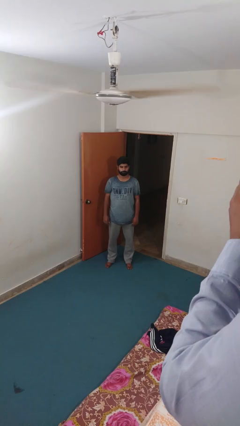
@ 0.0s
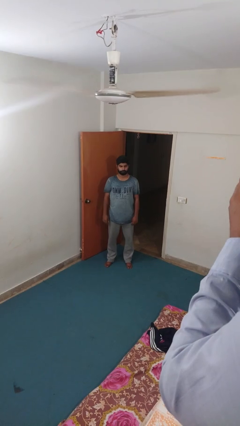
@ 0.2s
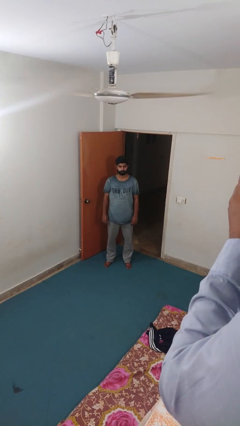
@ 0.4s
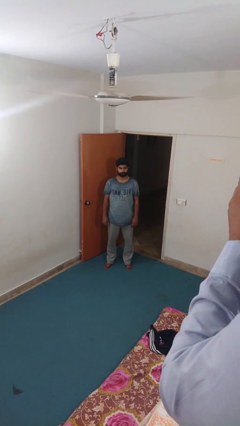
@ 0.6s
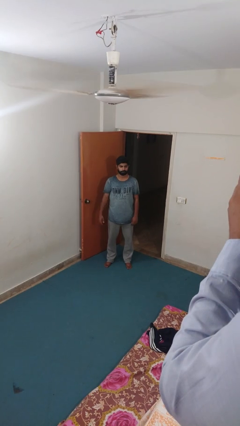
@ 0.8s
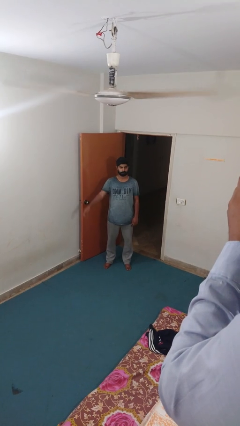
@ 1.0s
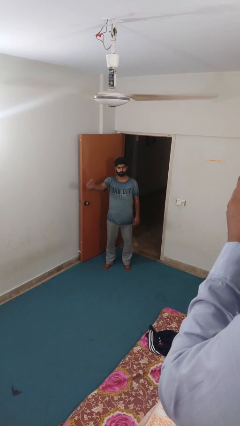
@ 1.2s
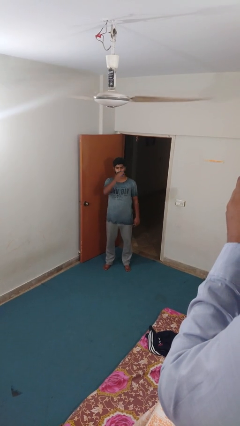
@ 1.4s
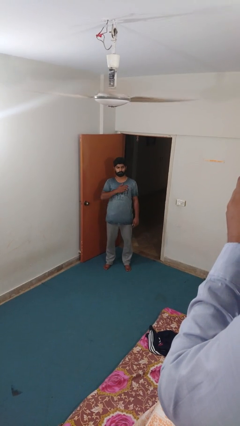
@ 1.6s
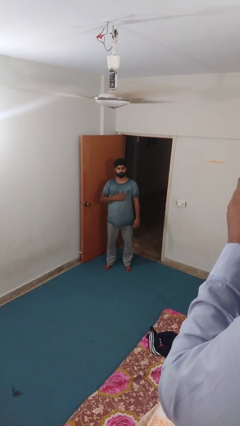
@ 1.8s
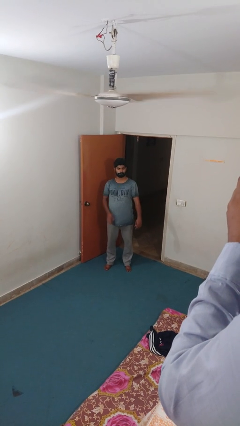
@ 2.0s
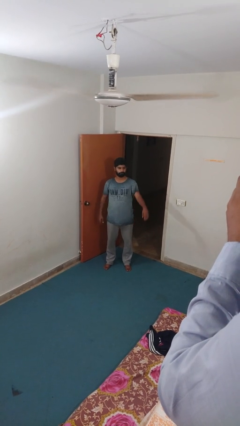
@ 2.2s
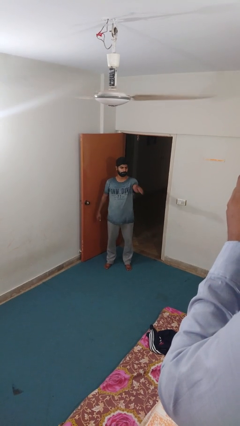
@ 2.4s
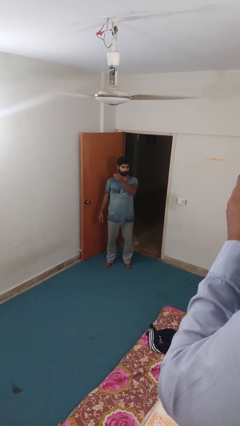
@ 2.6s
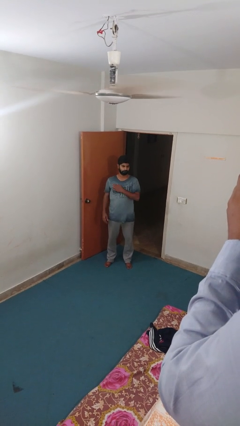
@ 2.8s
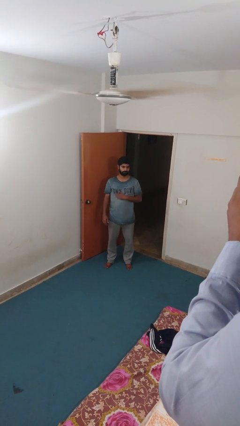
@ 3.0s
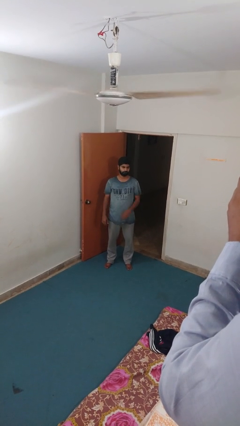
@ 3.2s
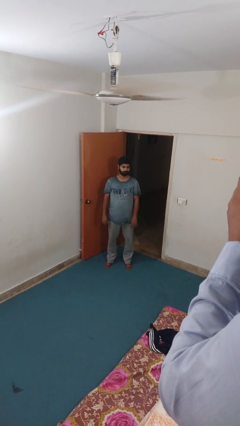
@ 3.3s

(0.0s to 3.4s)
person drums on chest

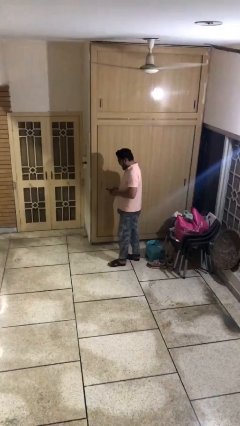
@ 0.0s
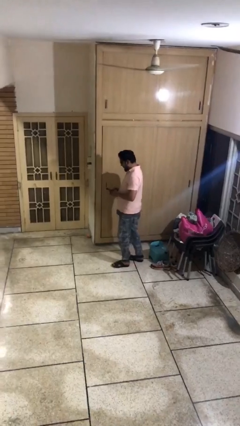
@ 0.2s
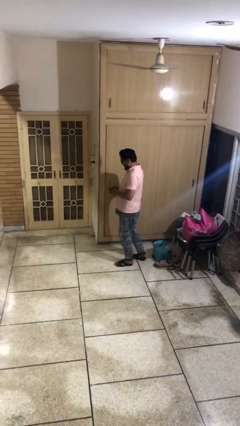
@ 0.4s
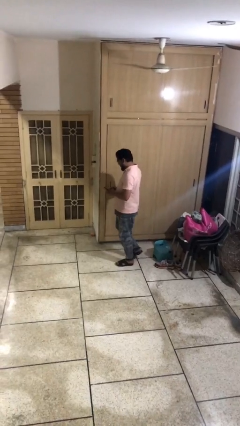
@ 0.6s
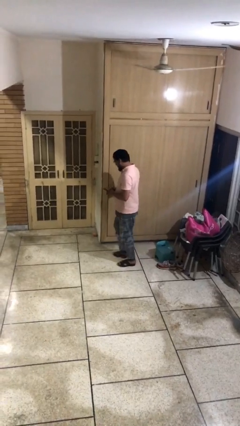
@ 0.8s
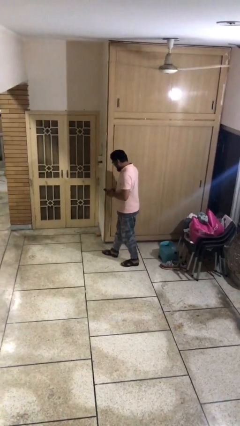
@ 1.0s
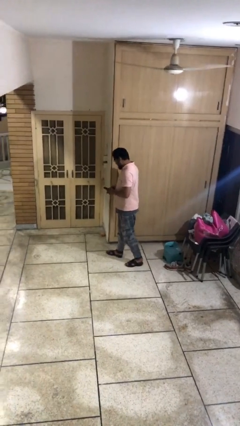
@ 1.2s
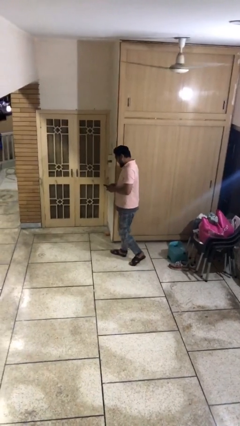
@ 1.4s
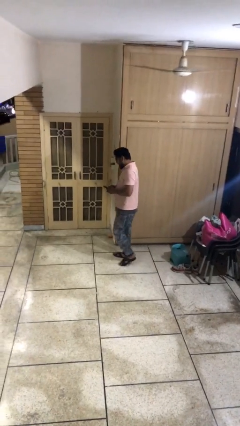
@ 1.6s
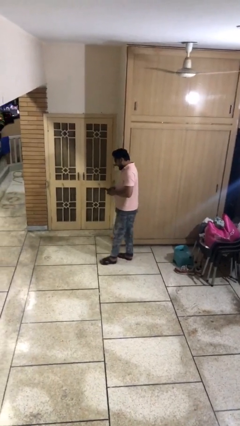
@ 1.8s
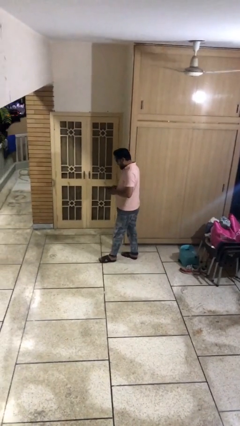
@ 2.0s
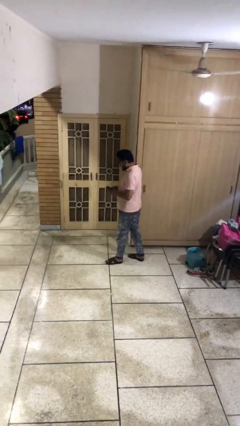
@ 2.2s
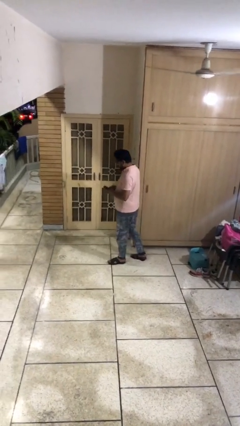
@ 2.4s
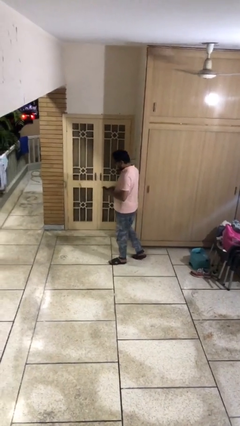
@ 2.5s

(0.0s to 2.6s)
person texts on phone

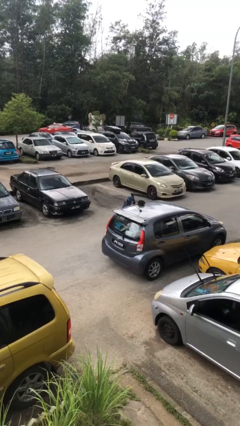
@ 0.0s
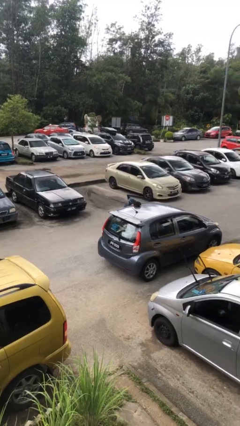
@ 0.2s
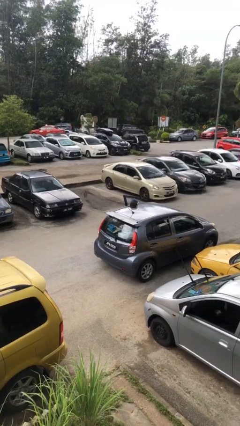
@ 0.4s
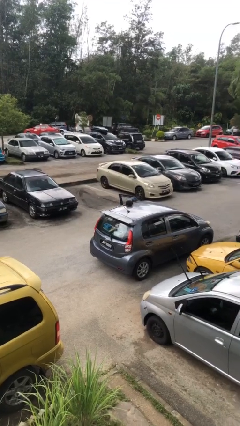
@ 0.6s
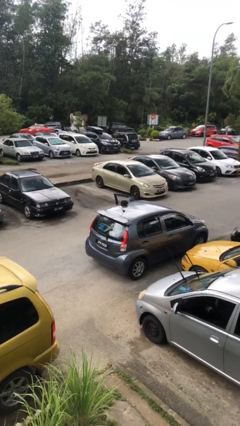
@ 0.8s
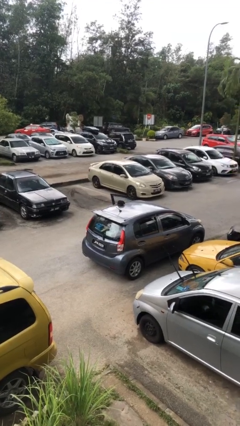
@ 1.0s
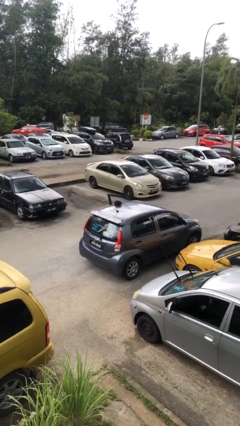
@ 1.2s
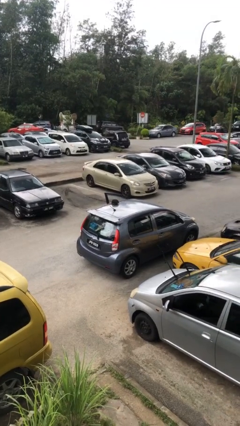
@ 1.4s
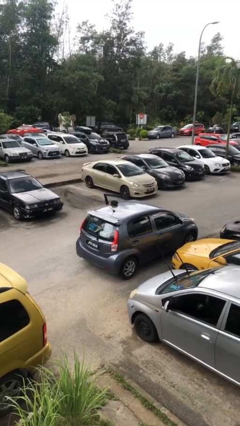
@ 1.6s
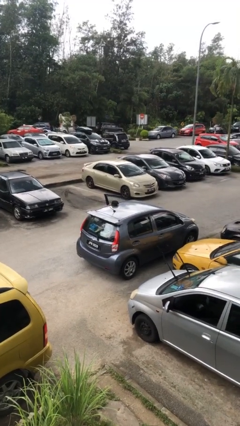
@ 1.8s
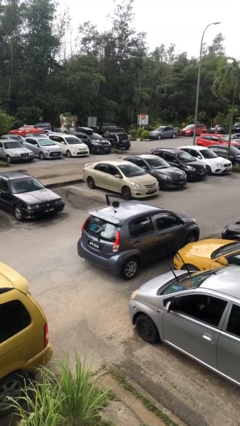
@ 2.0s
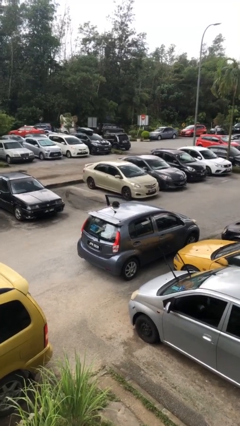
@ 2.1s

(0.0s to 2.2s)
person enters car

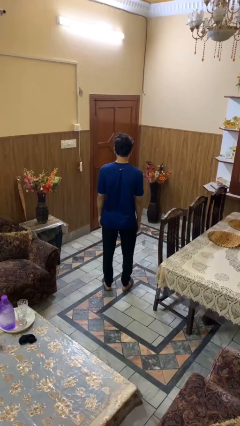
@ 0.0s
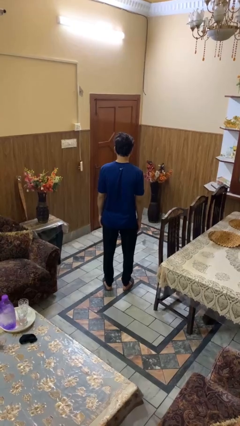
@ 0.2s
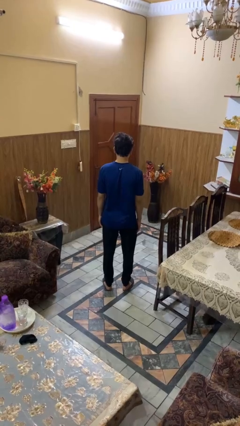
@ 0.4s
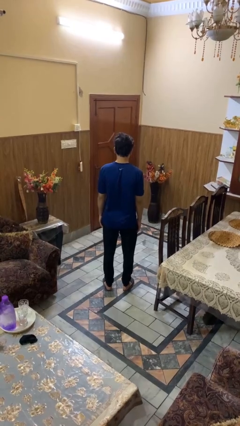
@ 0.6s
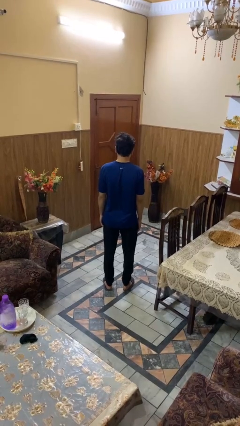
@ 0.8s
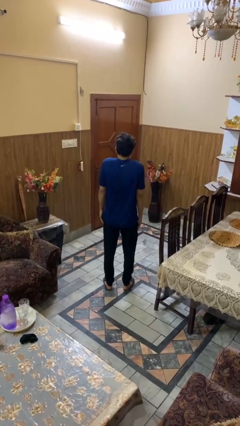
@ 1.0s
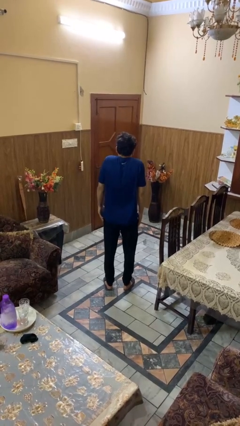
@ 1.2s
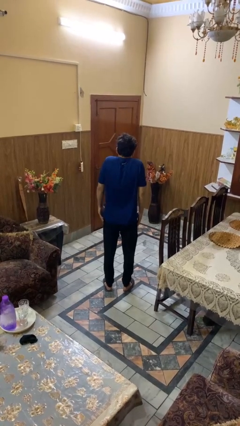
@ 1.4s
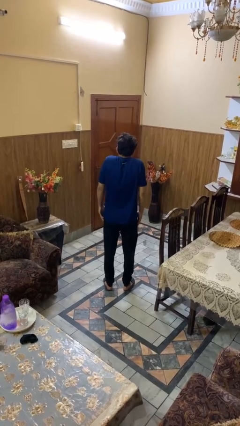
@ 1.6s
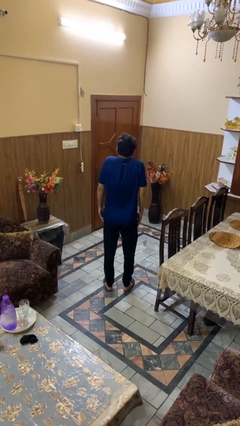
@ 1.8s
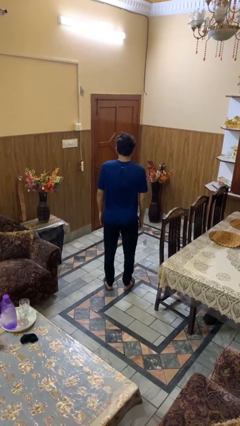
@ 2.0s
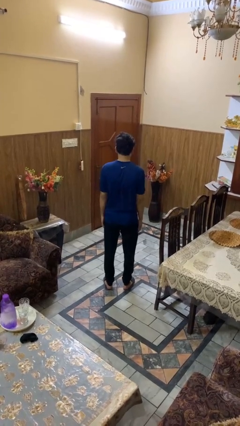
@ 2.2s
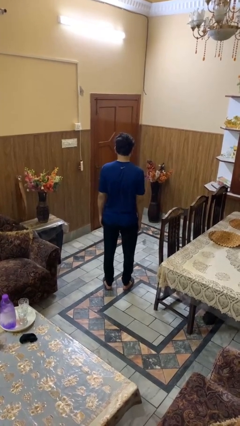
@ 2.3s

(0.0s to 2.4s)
person shrugs

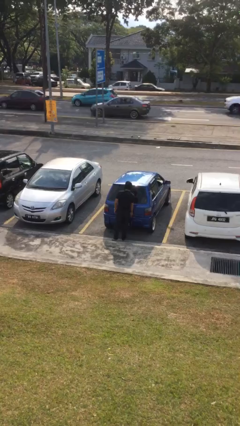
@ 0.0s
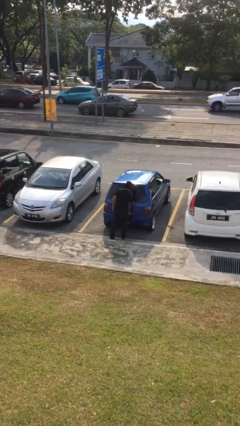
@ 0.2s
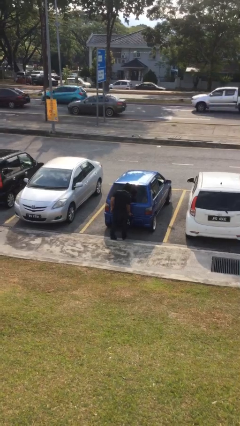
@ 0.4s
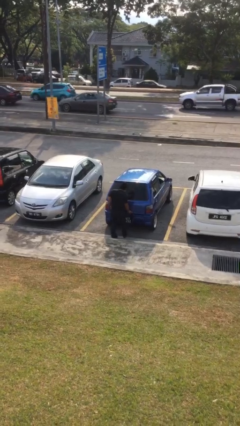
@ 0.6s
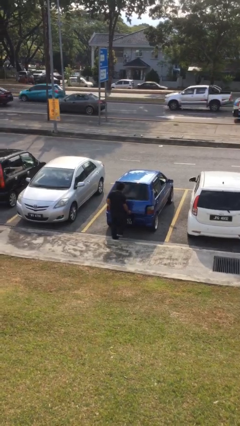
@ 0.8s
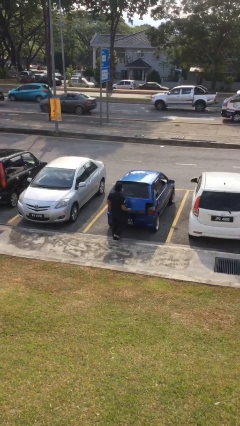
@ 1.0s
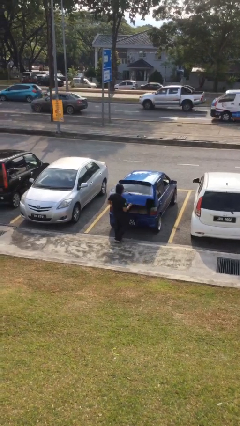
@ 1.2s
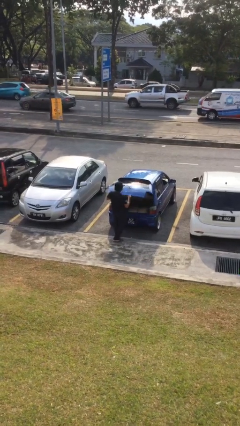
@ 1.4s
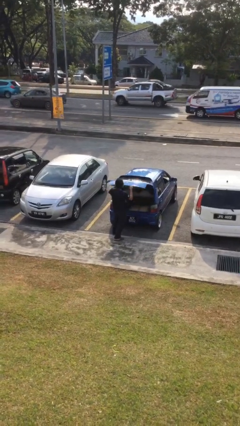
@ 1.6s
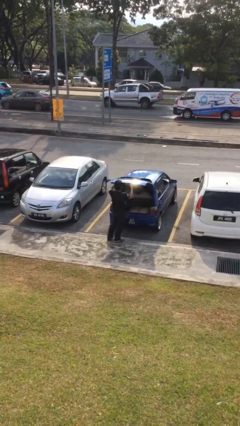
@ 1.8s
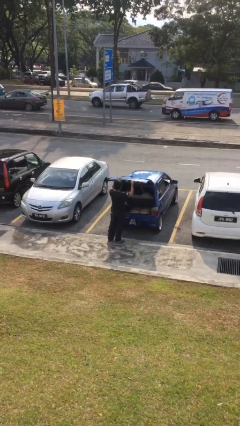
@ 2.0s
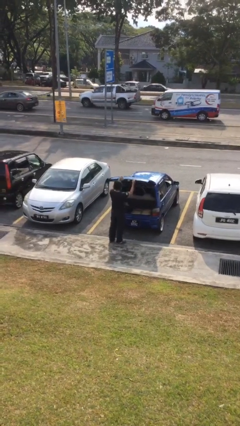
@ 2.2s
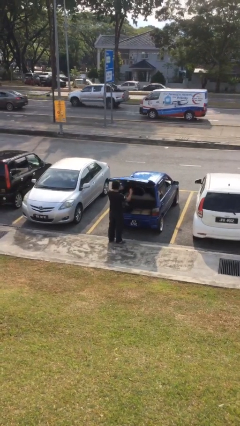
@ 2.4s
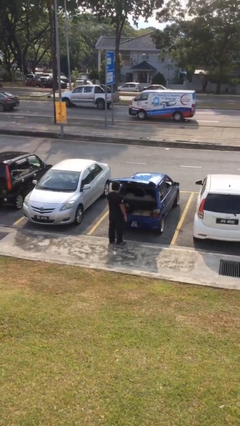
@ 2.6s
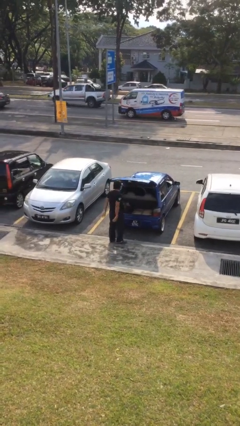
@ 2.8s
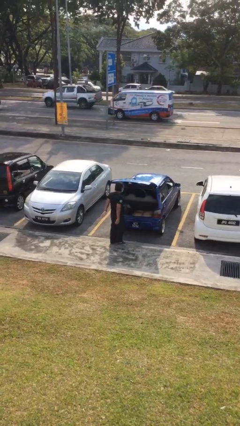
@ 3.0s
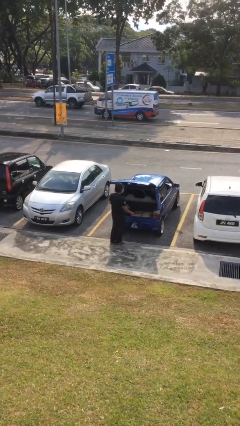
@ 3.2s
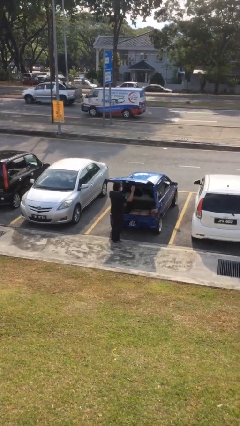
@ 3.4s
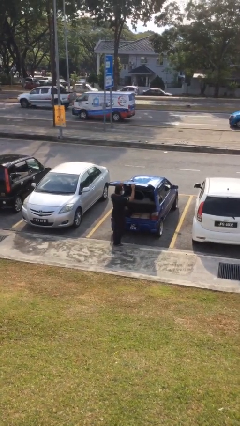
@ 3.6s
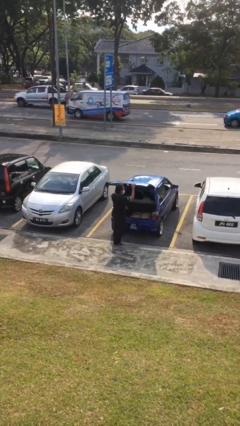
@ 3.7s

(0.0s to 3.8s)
person opens car trunk

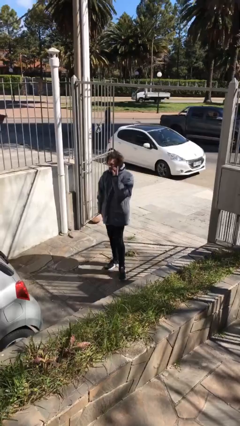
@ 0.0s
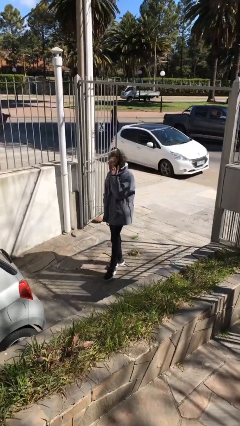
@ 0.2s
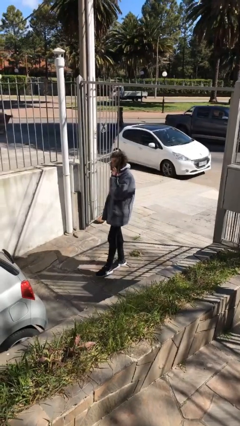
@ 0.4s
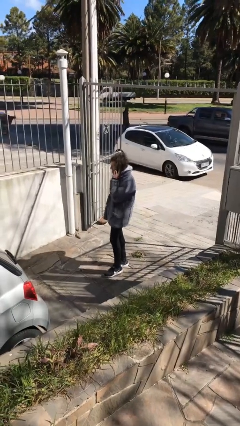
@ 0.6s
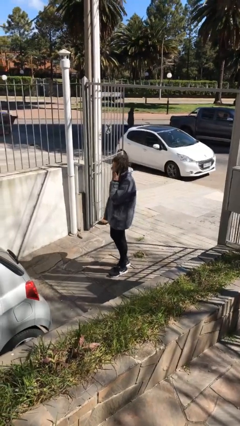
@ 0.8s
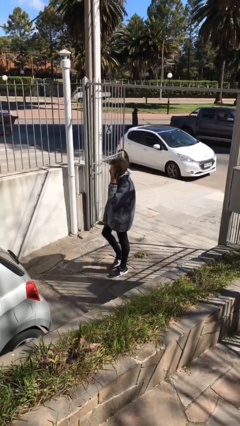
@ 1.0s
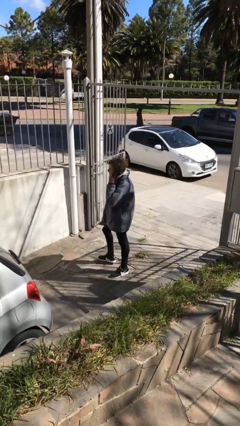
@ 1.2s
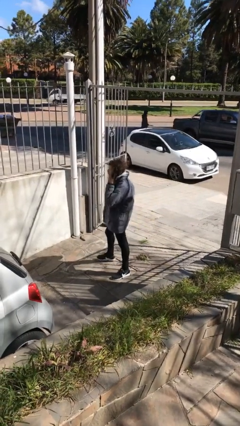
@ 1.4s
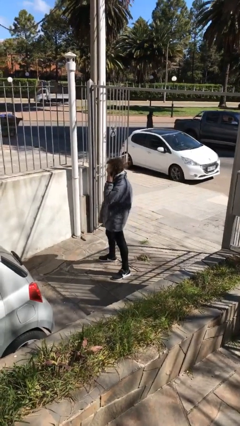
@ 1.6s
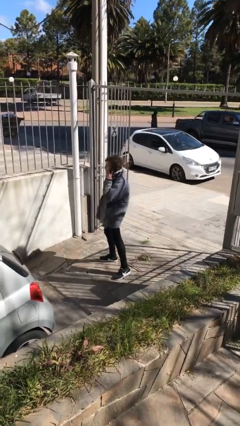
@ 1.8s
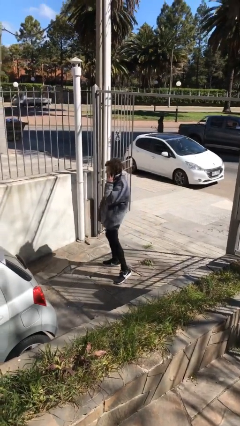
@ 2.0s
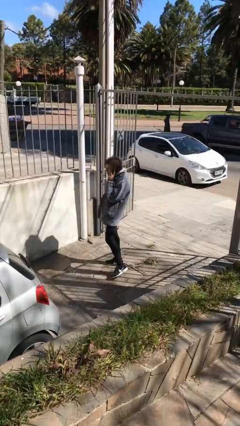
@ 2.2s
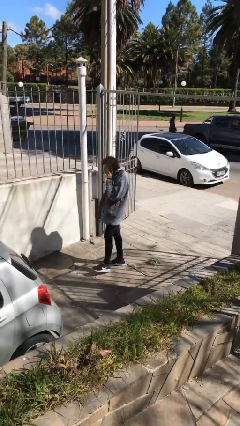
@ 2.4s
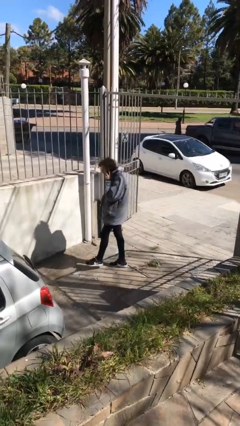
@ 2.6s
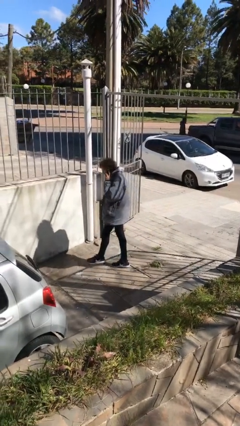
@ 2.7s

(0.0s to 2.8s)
person talks on phone

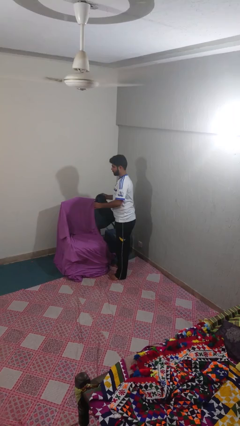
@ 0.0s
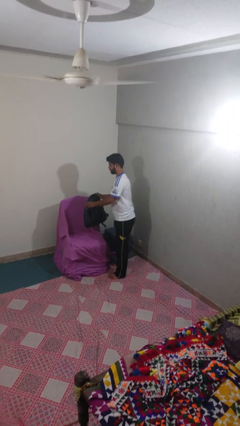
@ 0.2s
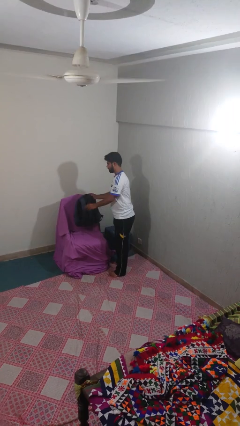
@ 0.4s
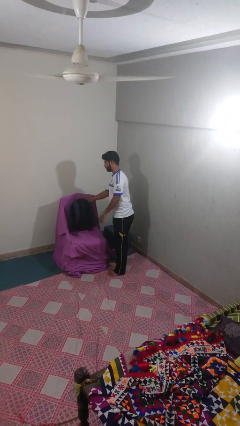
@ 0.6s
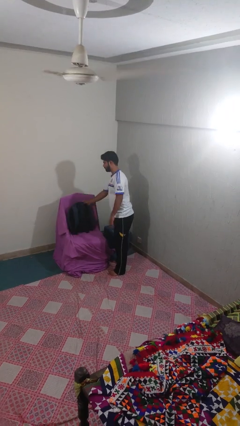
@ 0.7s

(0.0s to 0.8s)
person puts down object on couch
